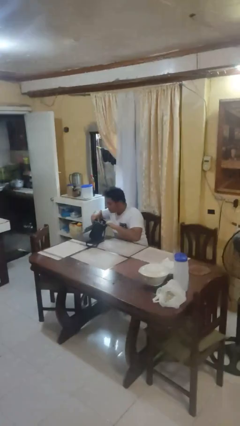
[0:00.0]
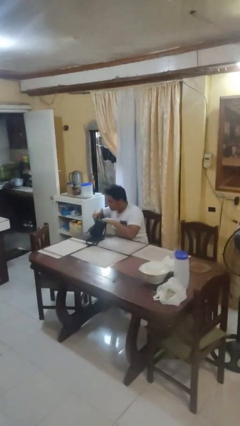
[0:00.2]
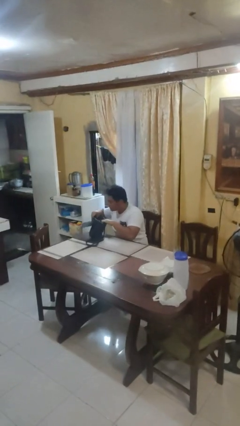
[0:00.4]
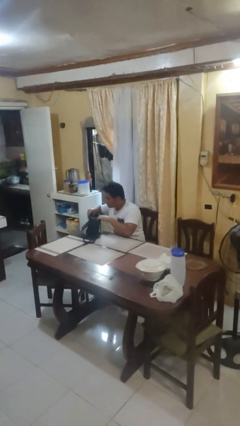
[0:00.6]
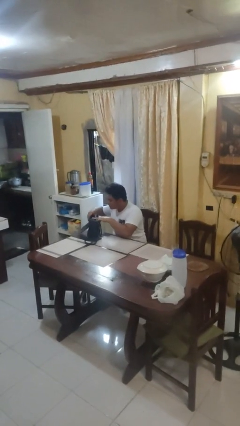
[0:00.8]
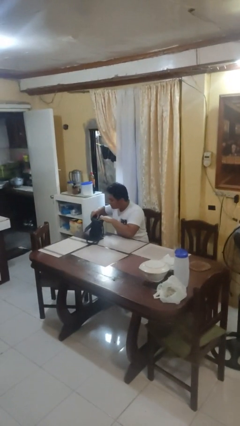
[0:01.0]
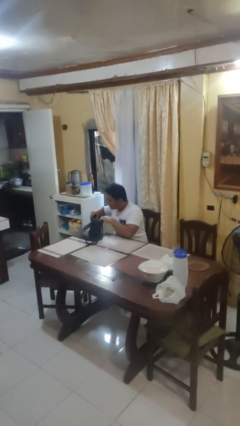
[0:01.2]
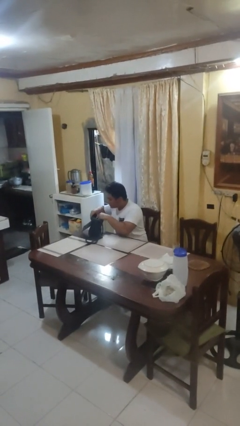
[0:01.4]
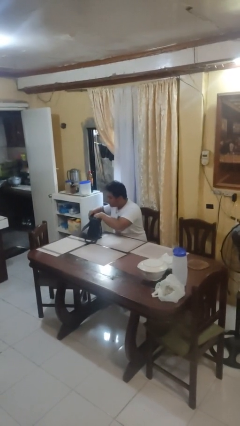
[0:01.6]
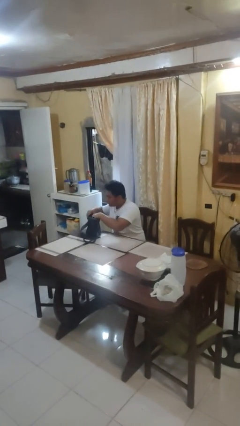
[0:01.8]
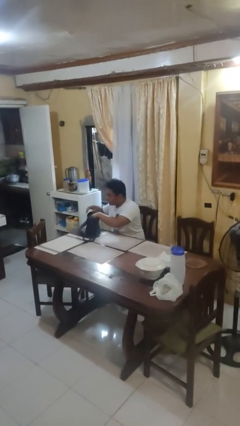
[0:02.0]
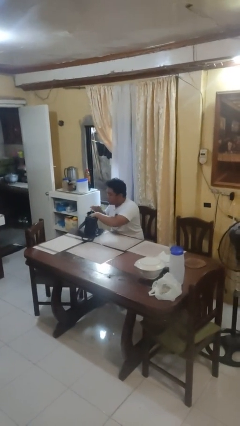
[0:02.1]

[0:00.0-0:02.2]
person searches in purse

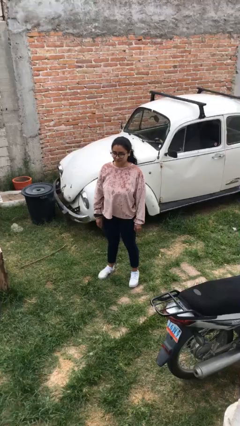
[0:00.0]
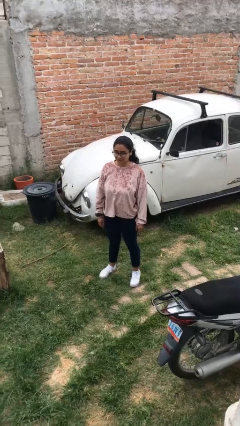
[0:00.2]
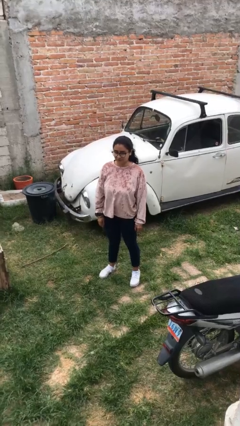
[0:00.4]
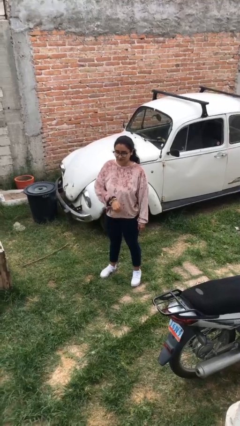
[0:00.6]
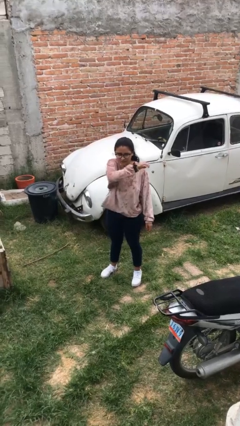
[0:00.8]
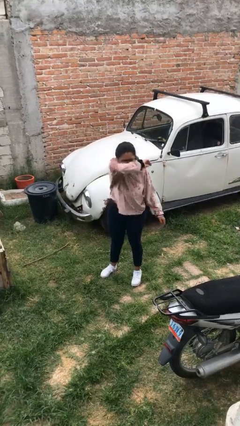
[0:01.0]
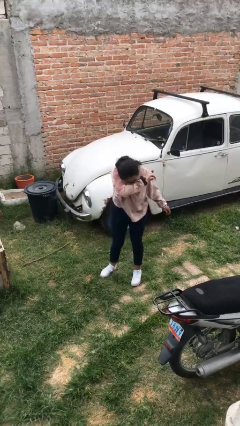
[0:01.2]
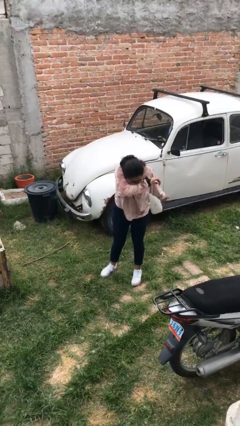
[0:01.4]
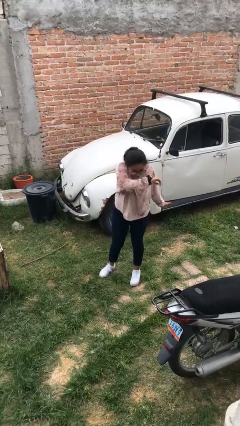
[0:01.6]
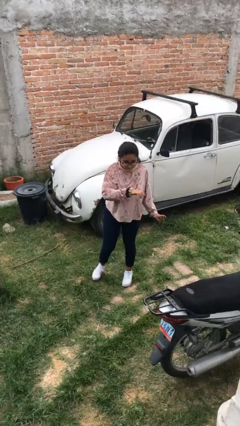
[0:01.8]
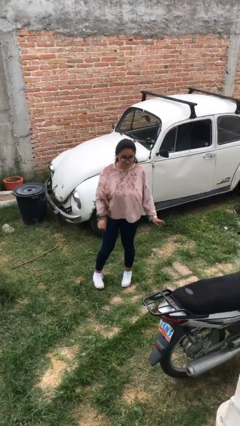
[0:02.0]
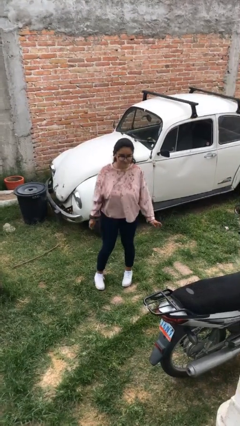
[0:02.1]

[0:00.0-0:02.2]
person sneezes into arm

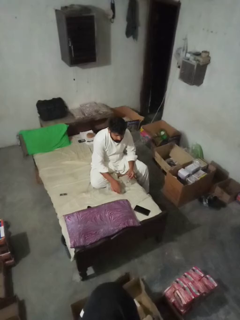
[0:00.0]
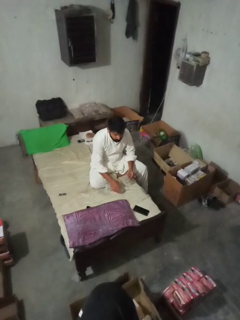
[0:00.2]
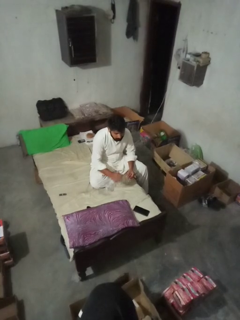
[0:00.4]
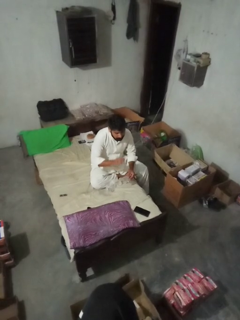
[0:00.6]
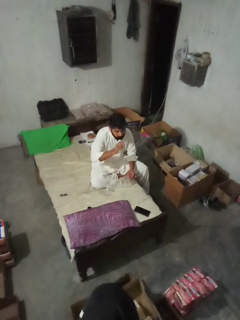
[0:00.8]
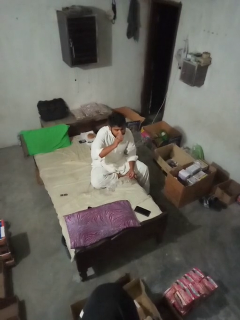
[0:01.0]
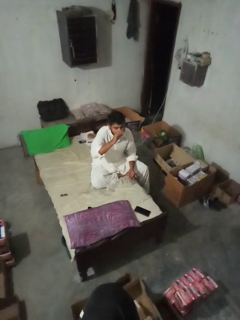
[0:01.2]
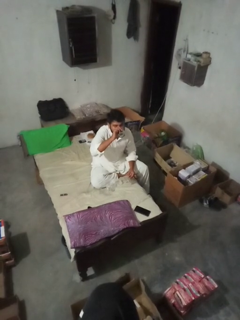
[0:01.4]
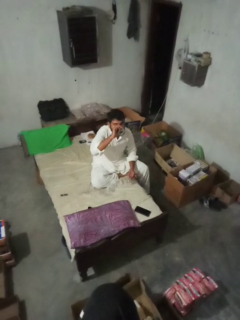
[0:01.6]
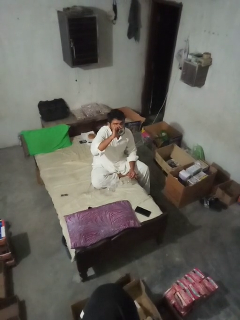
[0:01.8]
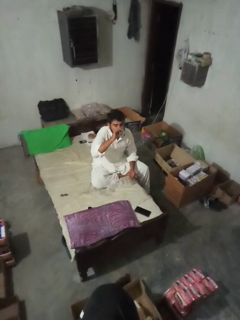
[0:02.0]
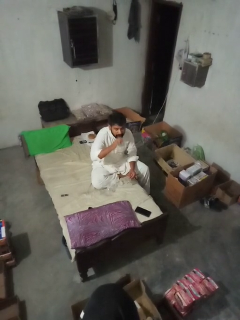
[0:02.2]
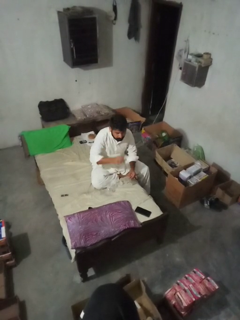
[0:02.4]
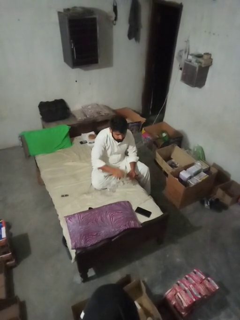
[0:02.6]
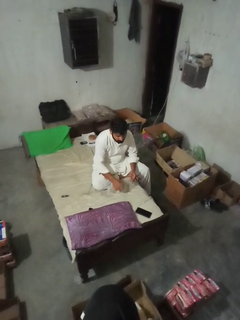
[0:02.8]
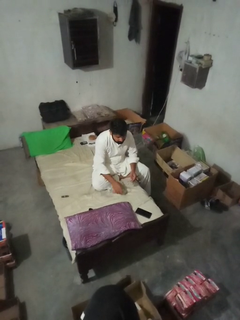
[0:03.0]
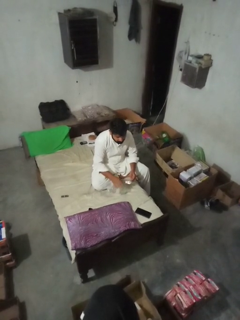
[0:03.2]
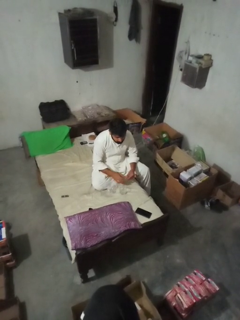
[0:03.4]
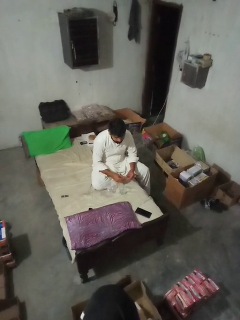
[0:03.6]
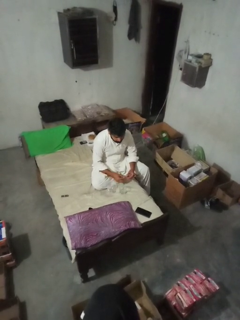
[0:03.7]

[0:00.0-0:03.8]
person drinks from cup

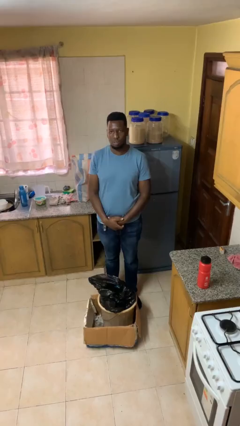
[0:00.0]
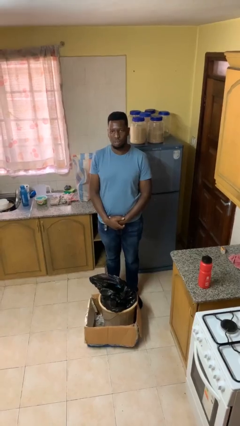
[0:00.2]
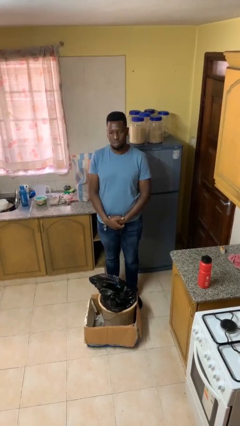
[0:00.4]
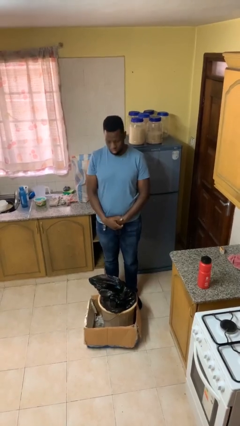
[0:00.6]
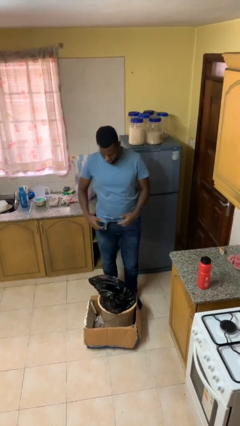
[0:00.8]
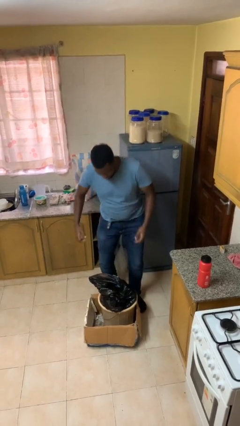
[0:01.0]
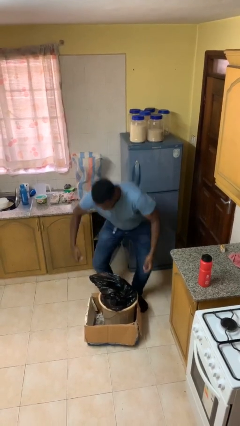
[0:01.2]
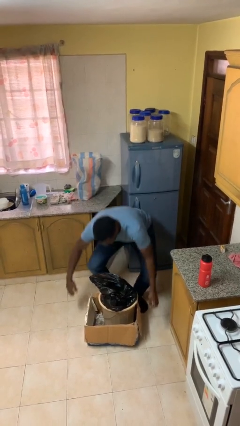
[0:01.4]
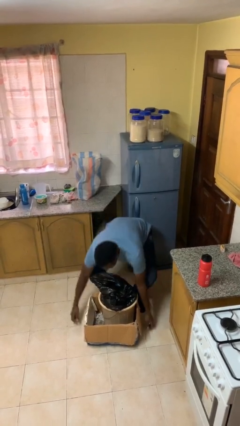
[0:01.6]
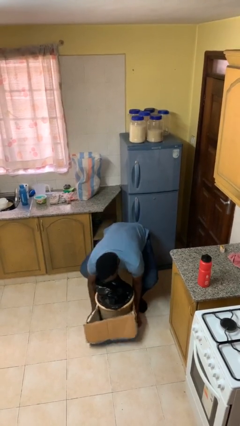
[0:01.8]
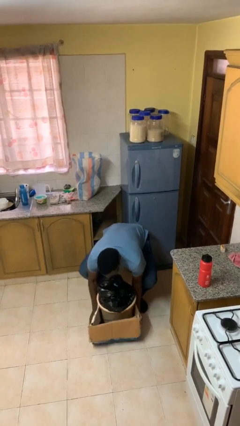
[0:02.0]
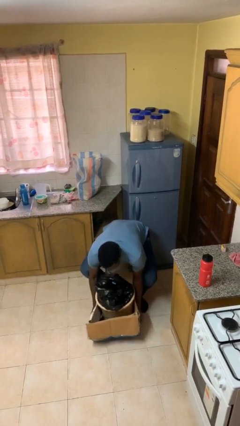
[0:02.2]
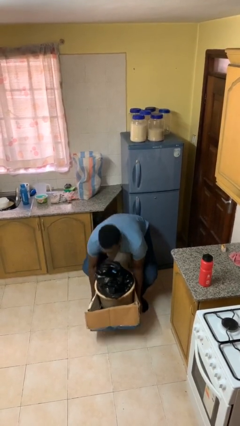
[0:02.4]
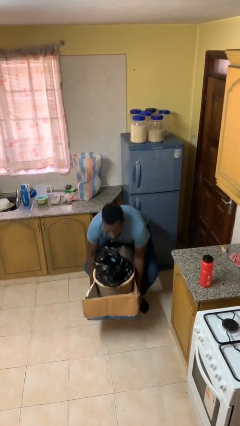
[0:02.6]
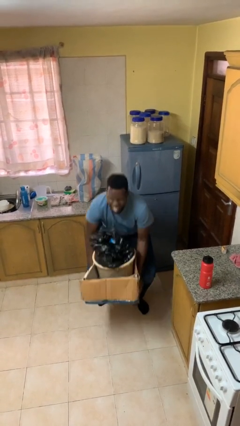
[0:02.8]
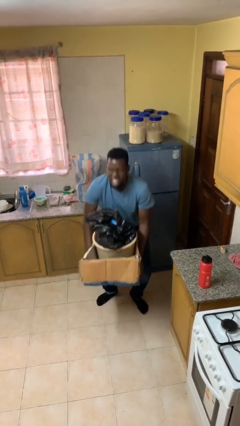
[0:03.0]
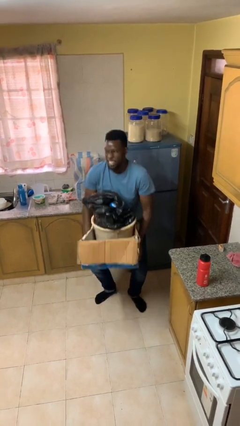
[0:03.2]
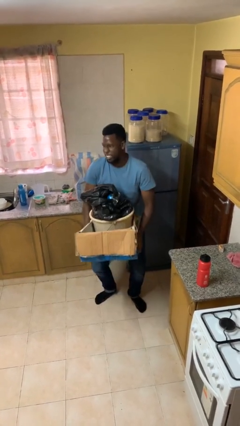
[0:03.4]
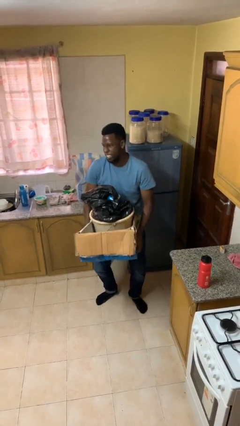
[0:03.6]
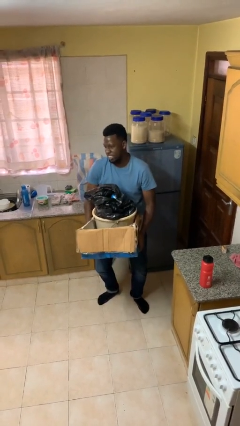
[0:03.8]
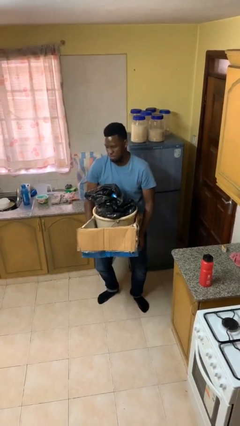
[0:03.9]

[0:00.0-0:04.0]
person picks up object from floor

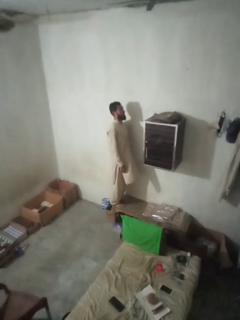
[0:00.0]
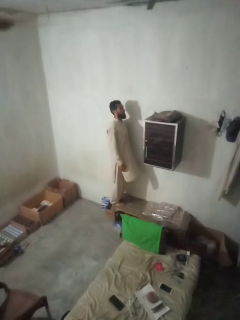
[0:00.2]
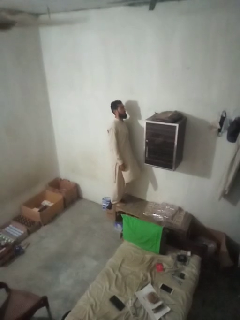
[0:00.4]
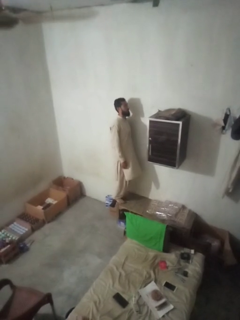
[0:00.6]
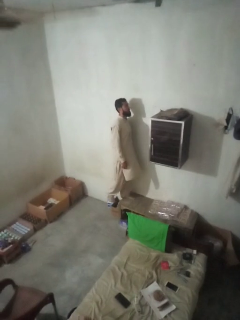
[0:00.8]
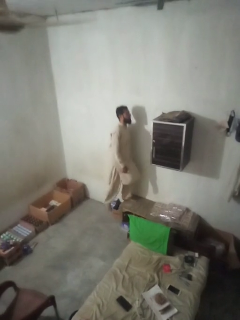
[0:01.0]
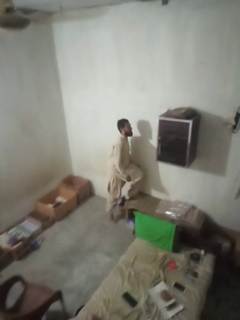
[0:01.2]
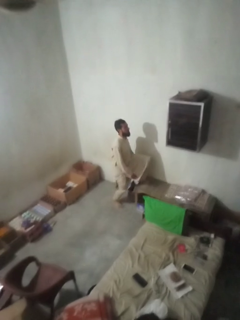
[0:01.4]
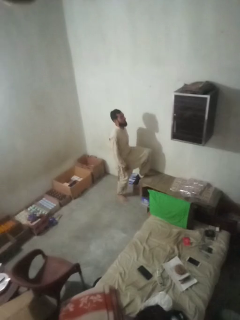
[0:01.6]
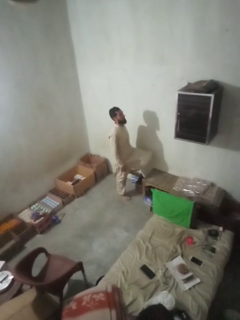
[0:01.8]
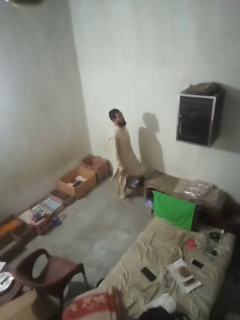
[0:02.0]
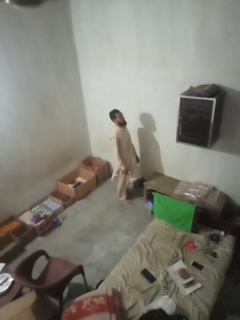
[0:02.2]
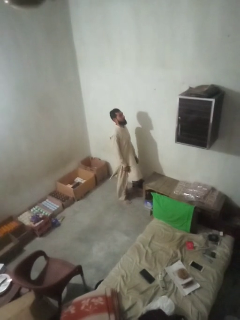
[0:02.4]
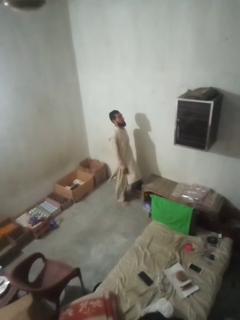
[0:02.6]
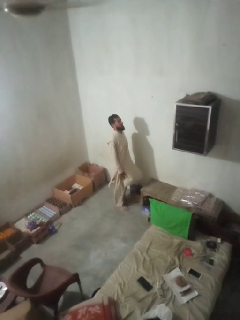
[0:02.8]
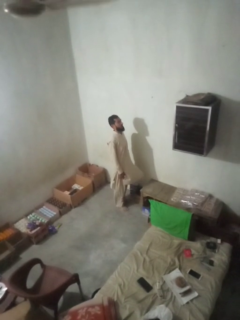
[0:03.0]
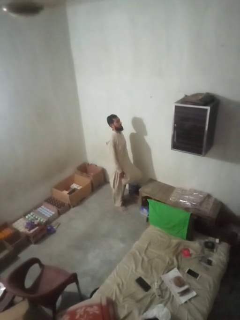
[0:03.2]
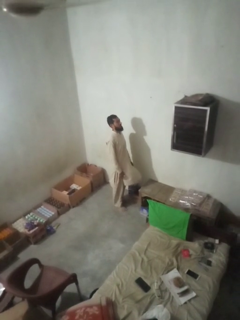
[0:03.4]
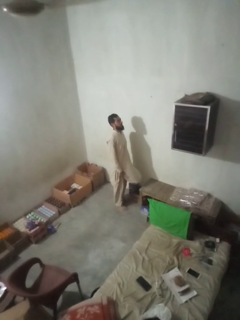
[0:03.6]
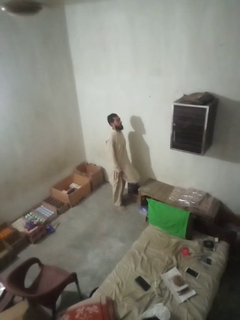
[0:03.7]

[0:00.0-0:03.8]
person climbs off table

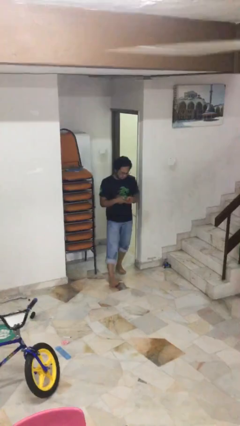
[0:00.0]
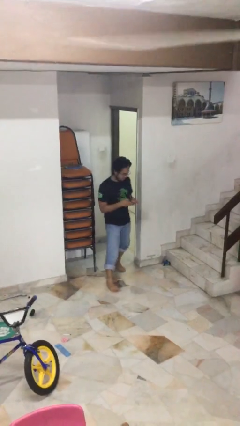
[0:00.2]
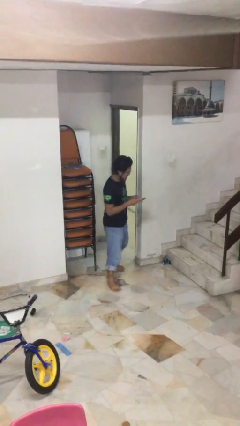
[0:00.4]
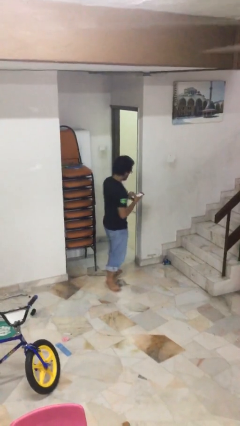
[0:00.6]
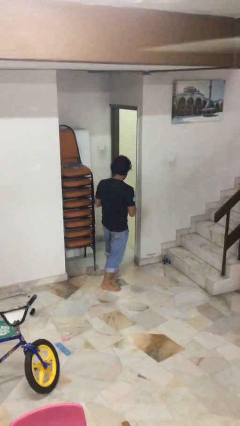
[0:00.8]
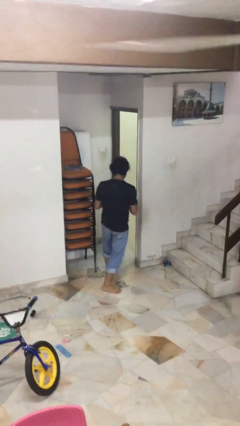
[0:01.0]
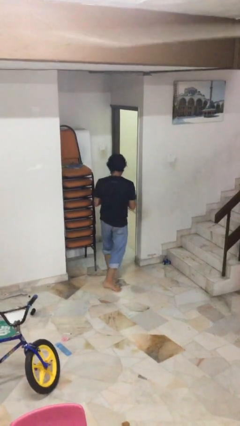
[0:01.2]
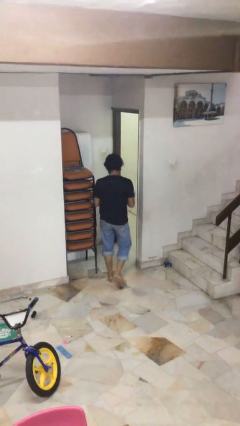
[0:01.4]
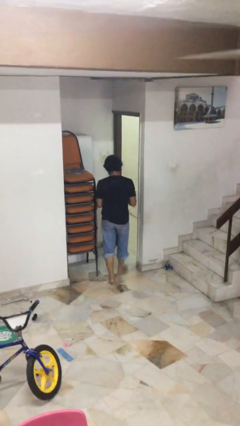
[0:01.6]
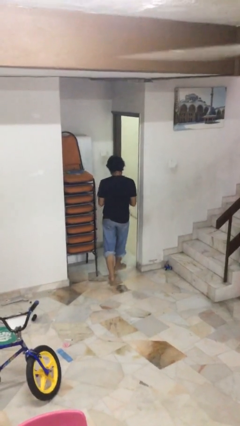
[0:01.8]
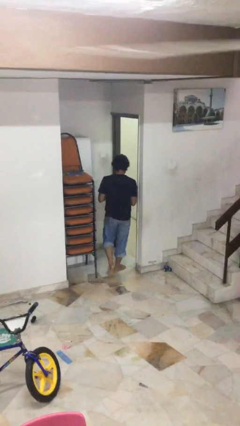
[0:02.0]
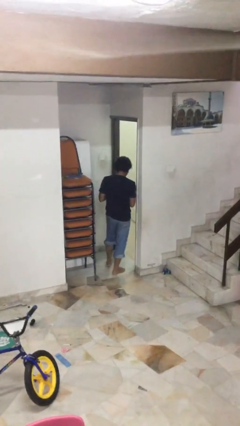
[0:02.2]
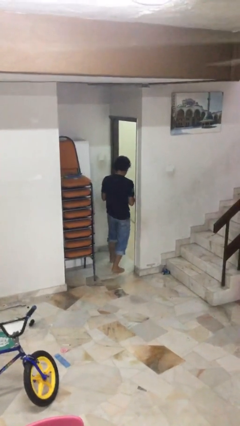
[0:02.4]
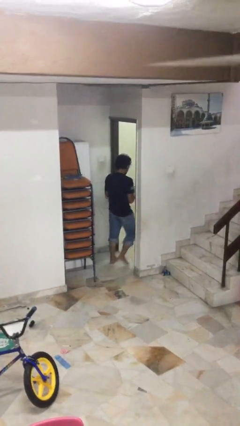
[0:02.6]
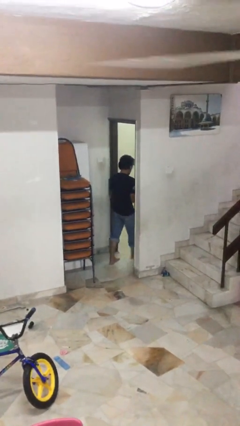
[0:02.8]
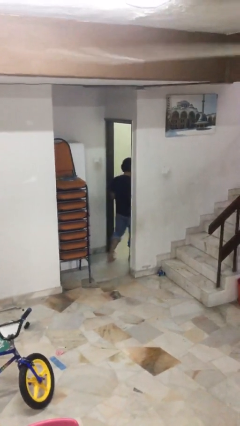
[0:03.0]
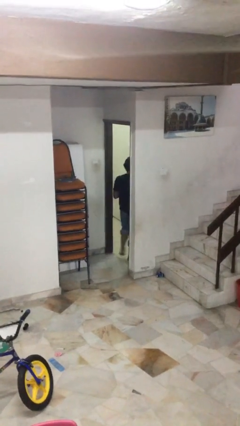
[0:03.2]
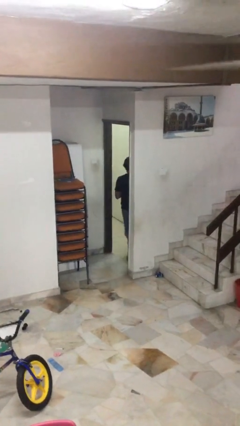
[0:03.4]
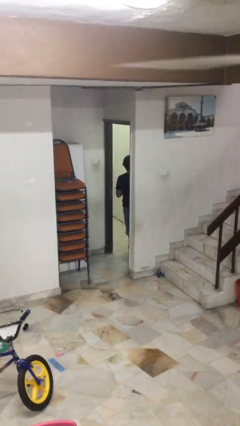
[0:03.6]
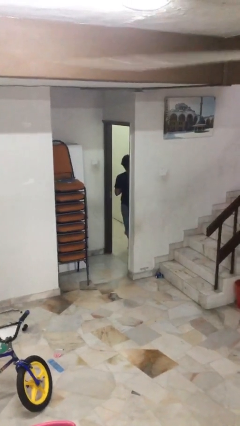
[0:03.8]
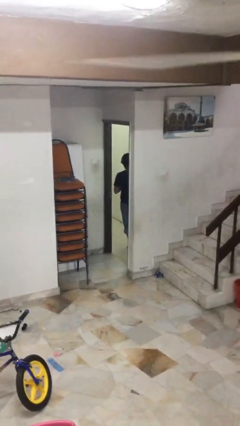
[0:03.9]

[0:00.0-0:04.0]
person exits scene through structure
